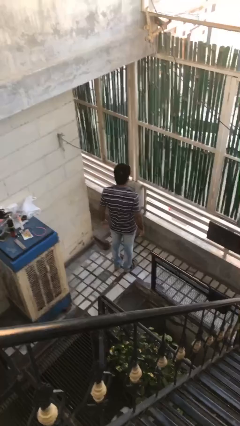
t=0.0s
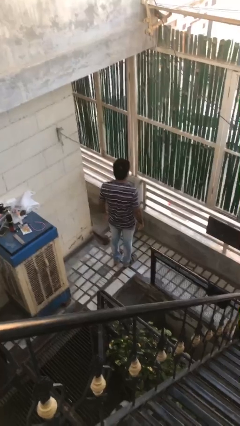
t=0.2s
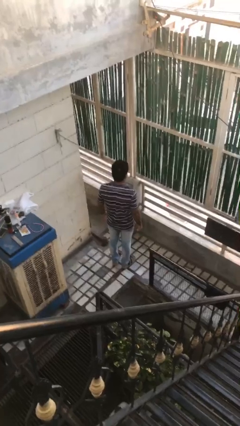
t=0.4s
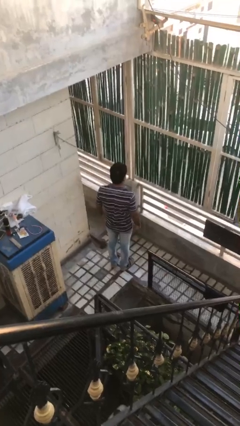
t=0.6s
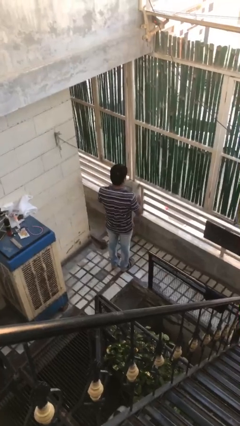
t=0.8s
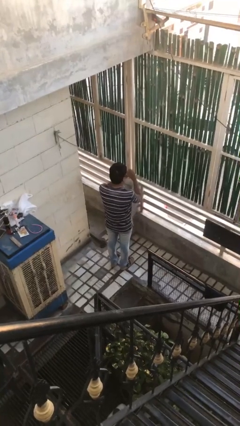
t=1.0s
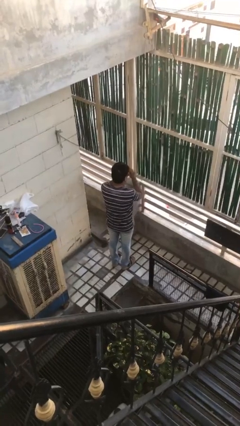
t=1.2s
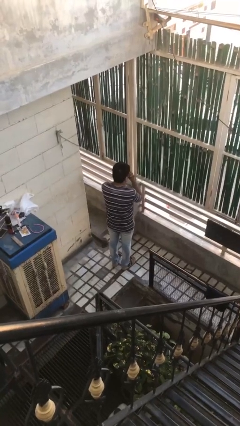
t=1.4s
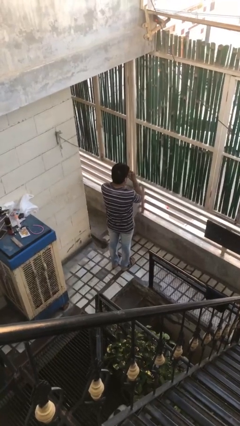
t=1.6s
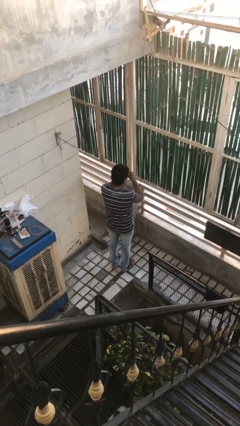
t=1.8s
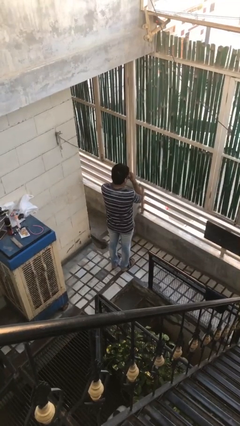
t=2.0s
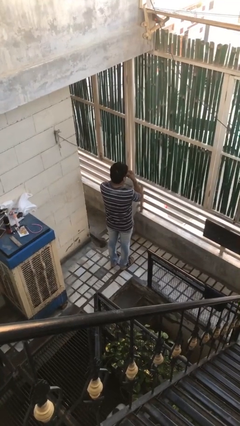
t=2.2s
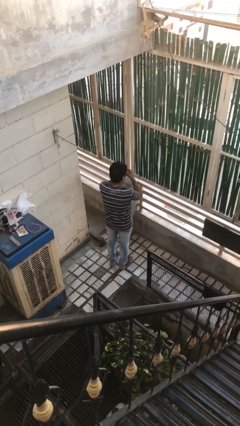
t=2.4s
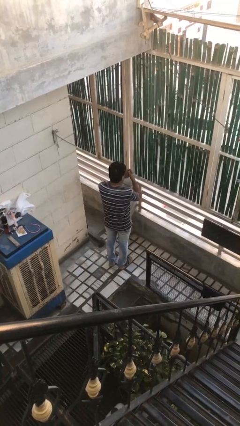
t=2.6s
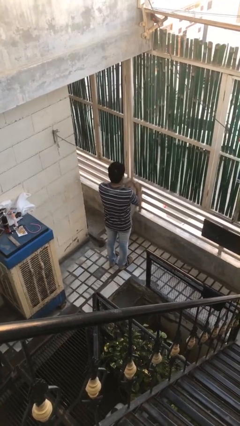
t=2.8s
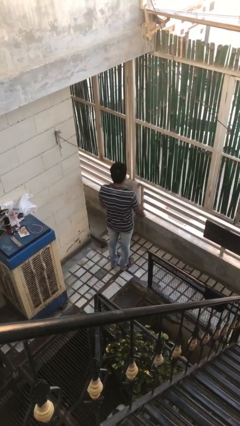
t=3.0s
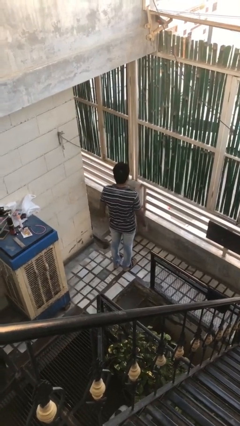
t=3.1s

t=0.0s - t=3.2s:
person snaps fingers

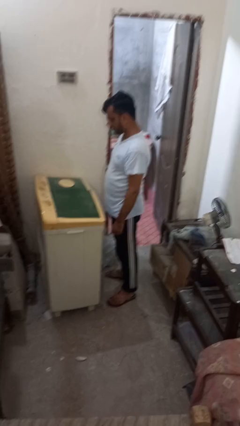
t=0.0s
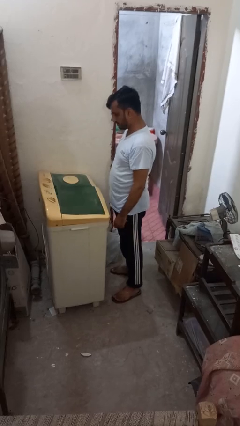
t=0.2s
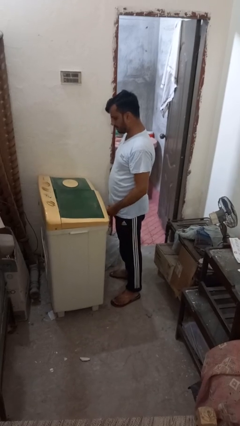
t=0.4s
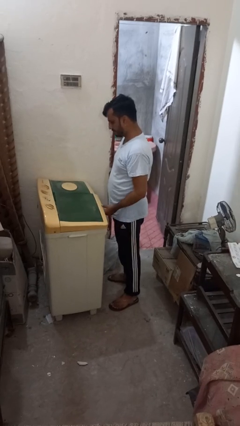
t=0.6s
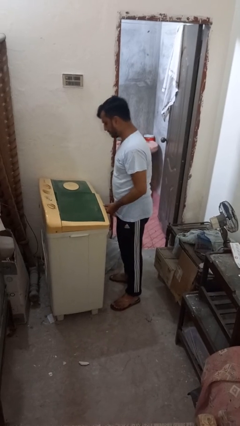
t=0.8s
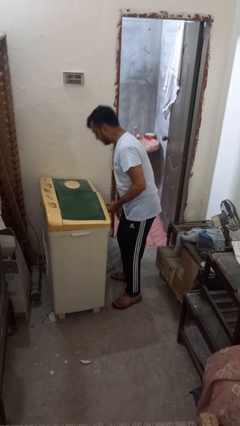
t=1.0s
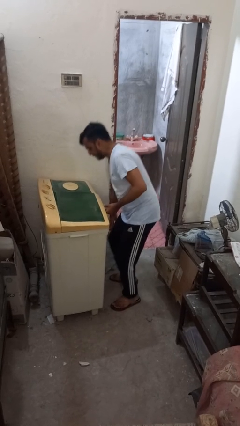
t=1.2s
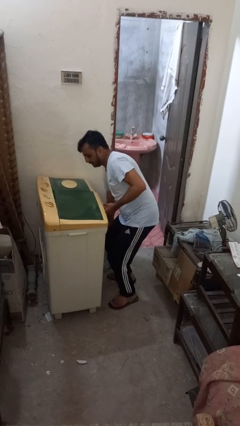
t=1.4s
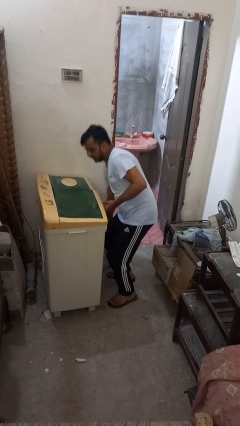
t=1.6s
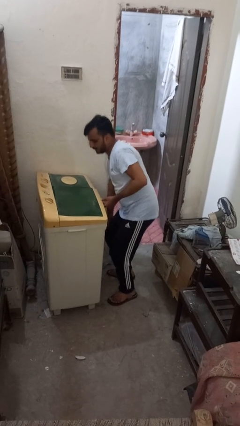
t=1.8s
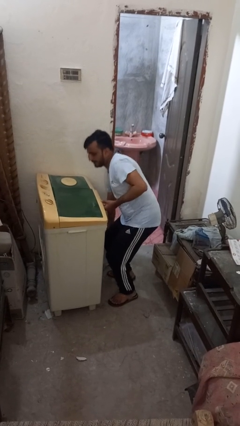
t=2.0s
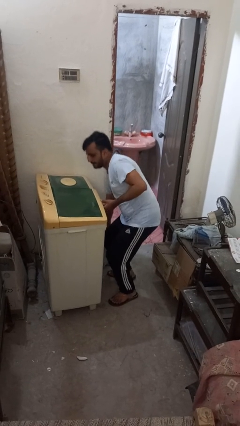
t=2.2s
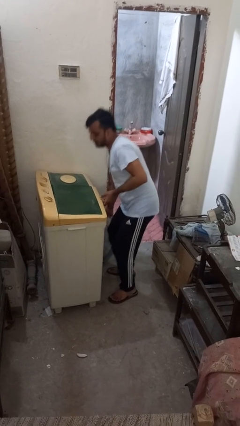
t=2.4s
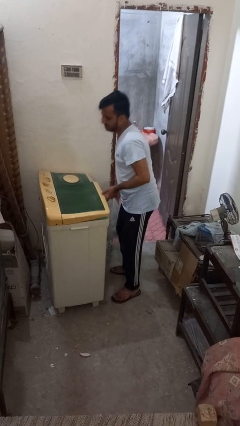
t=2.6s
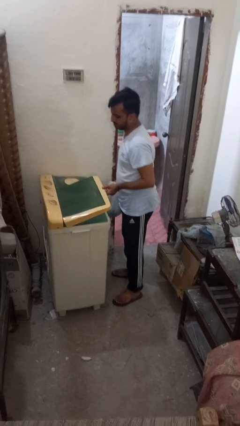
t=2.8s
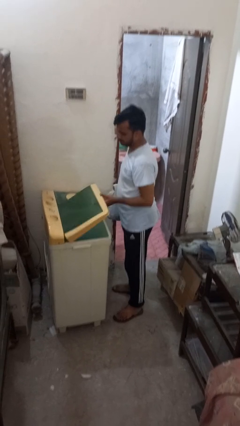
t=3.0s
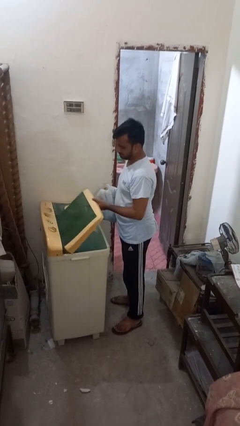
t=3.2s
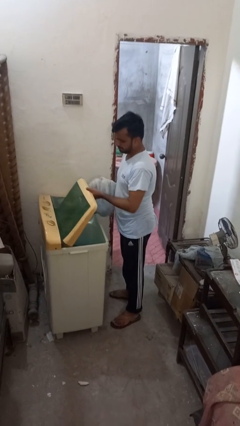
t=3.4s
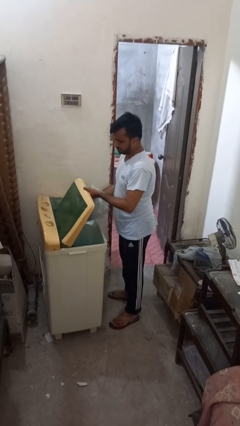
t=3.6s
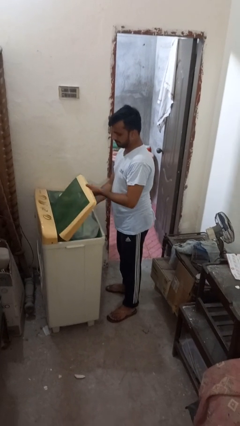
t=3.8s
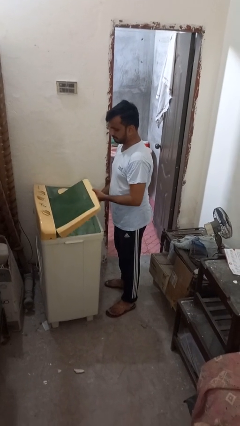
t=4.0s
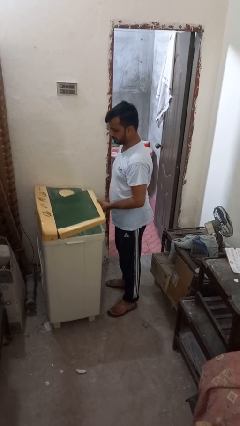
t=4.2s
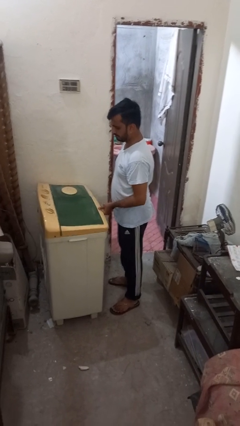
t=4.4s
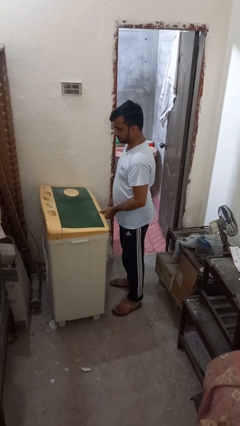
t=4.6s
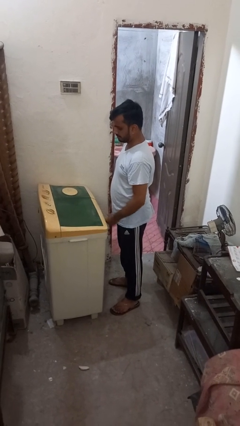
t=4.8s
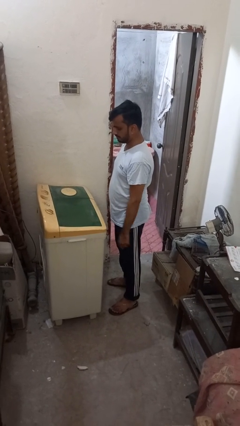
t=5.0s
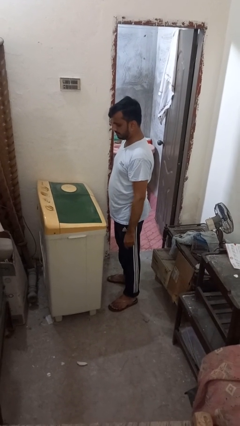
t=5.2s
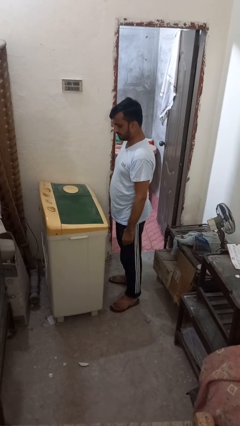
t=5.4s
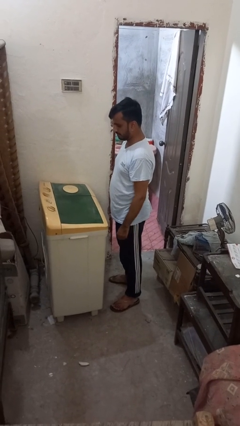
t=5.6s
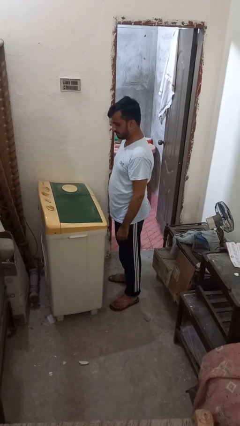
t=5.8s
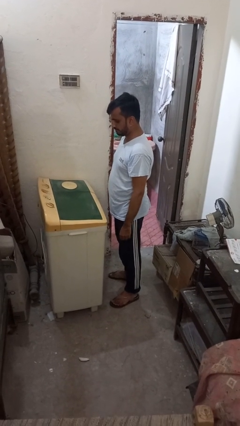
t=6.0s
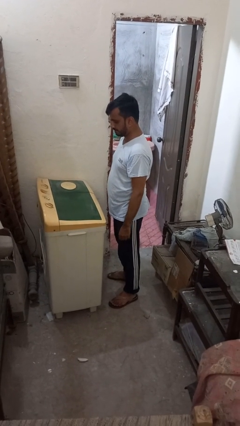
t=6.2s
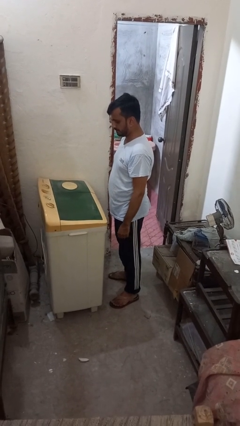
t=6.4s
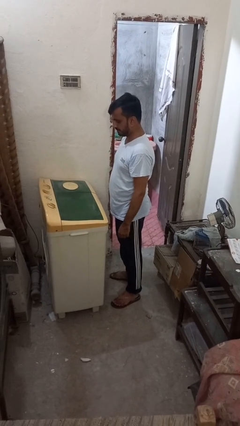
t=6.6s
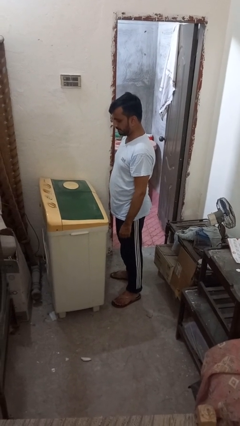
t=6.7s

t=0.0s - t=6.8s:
person loads clotheswasher

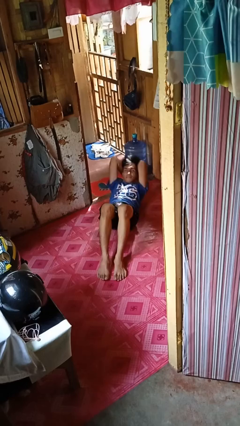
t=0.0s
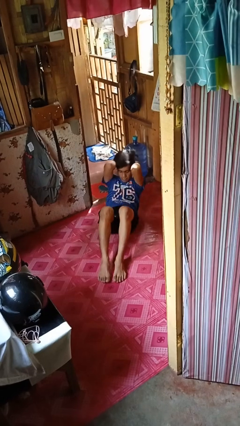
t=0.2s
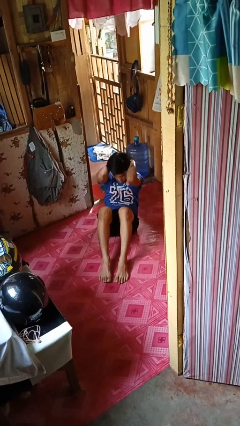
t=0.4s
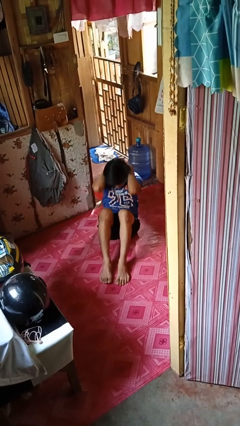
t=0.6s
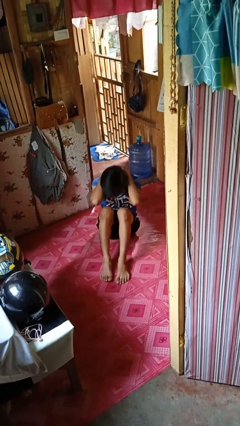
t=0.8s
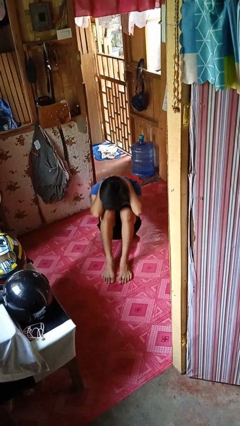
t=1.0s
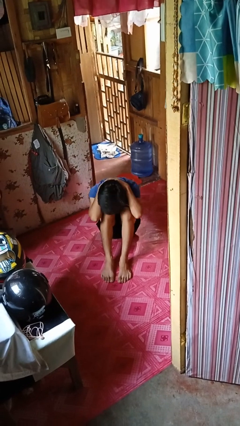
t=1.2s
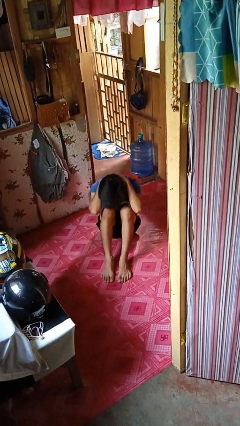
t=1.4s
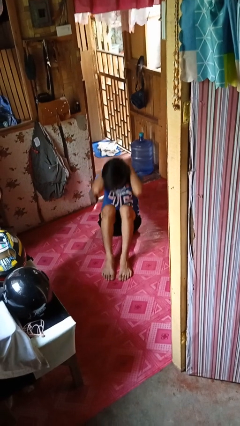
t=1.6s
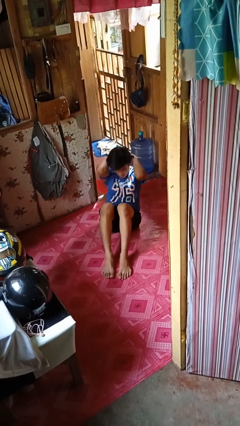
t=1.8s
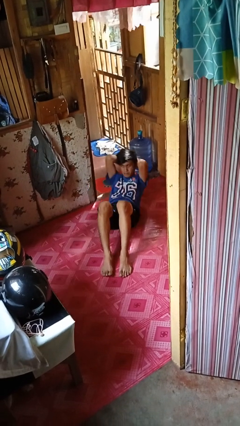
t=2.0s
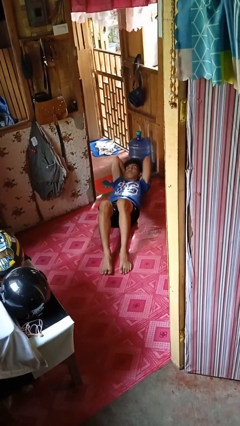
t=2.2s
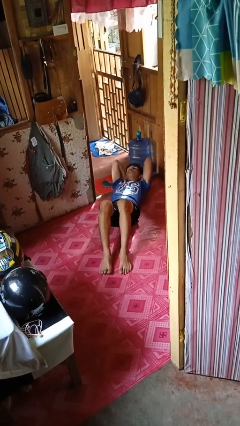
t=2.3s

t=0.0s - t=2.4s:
person exercises with situp

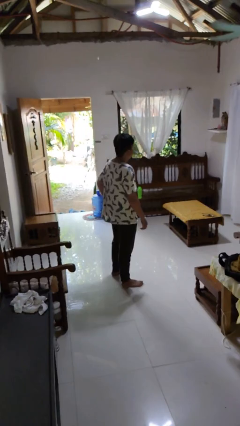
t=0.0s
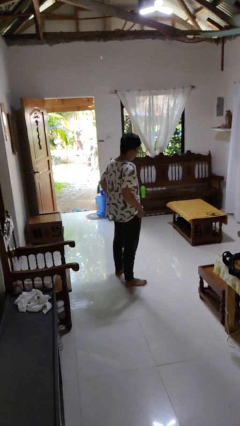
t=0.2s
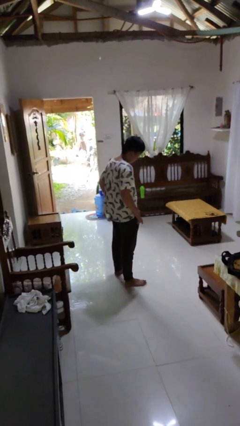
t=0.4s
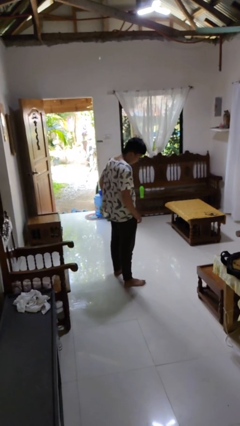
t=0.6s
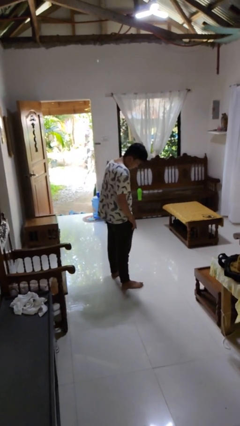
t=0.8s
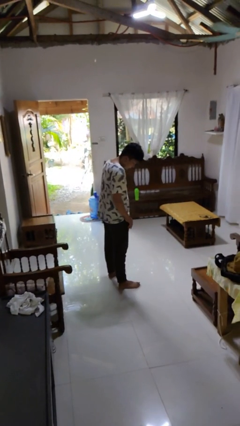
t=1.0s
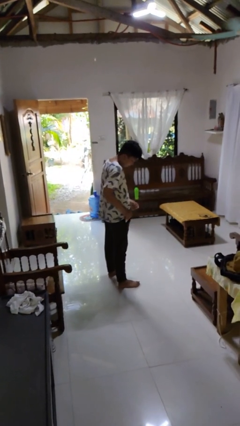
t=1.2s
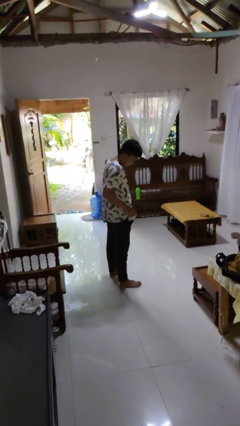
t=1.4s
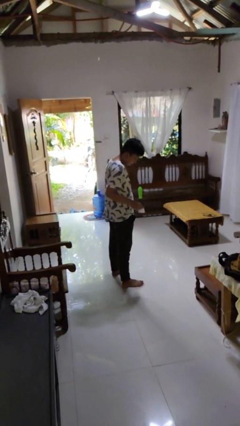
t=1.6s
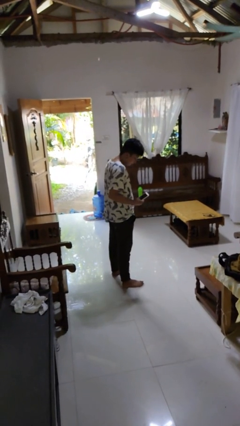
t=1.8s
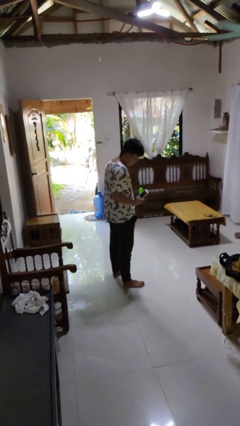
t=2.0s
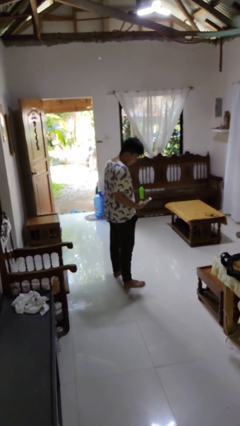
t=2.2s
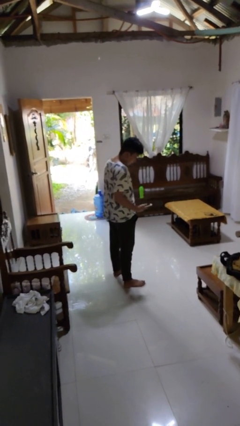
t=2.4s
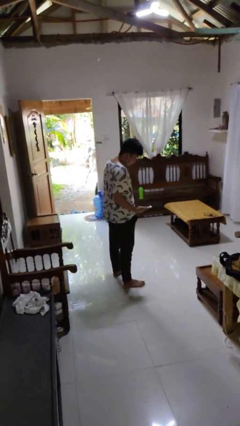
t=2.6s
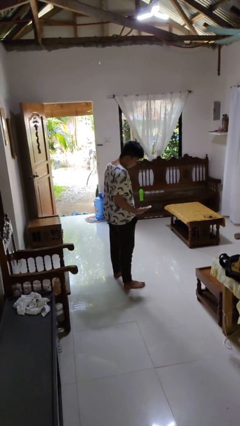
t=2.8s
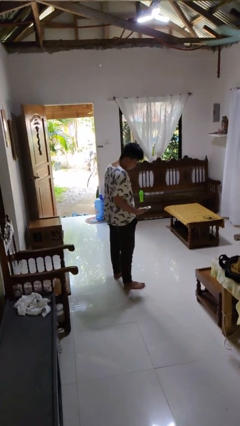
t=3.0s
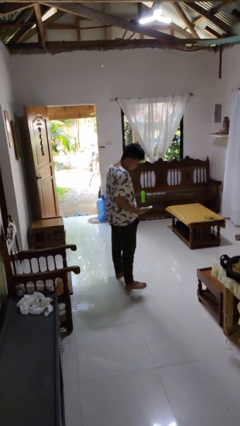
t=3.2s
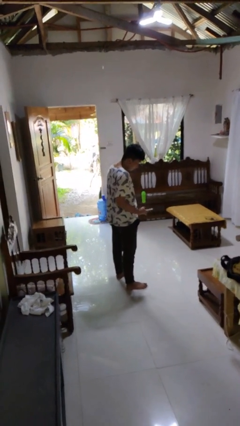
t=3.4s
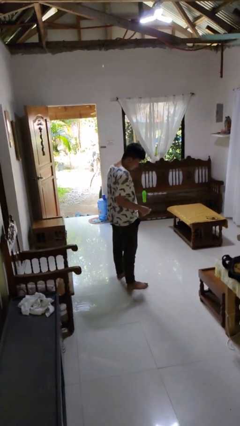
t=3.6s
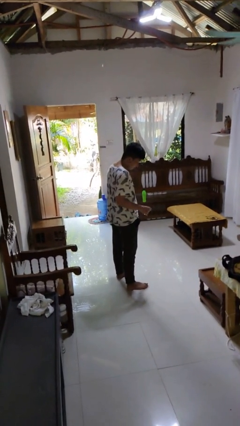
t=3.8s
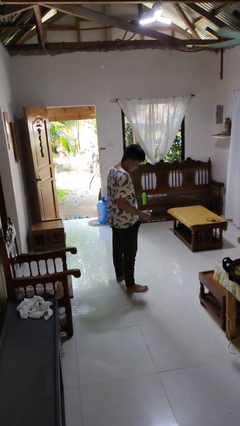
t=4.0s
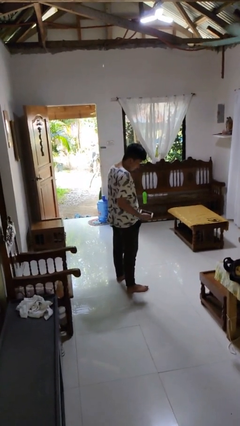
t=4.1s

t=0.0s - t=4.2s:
person takes phone from pocket

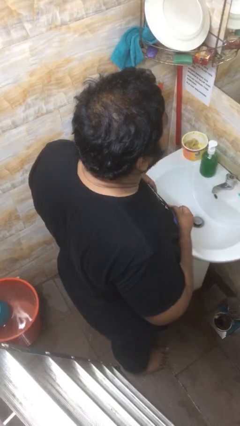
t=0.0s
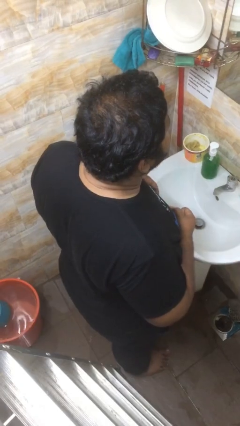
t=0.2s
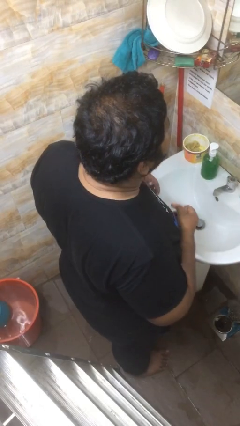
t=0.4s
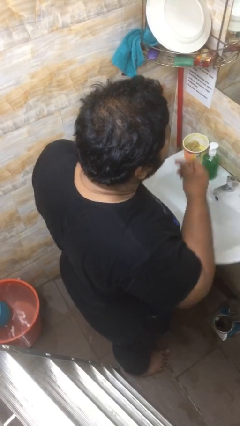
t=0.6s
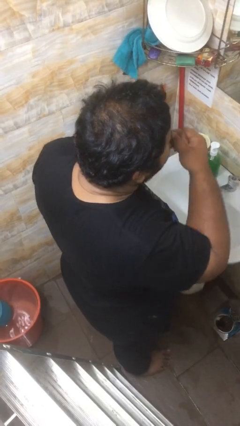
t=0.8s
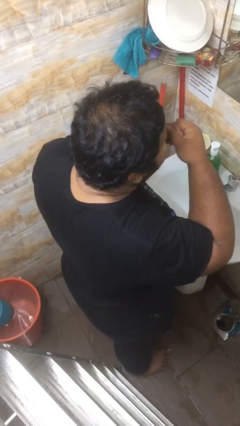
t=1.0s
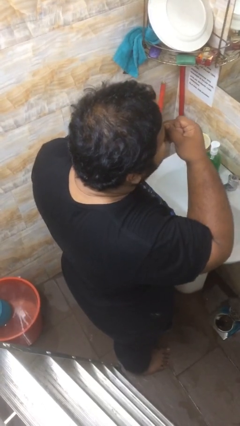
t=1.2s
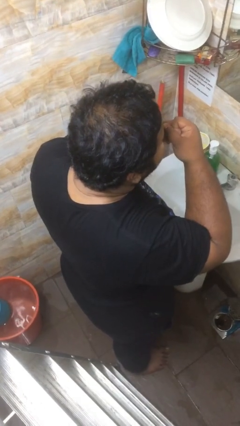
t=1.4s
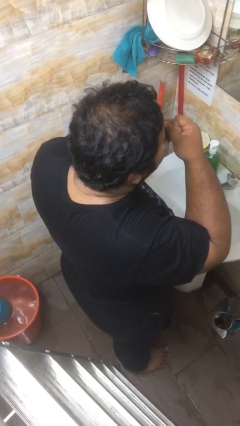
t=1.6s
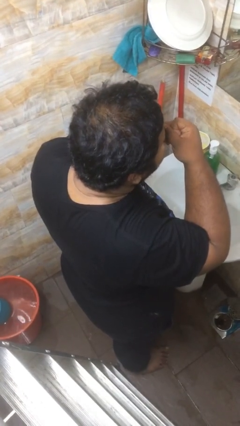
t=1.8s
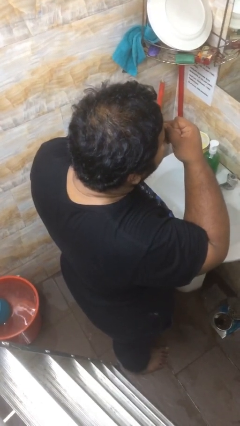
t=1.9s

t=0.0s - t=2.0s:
person flosses
